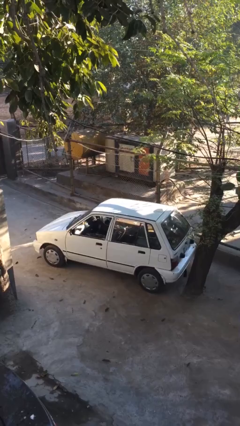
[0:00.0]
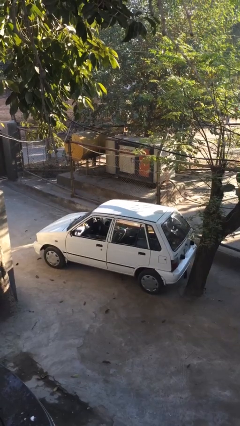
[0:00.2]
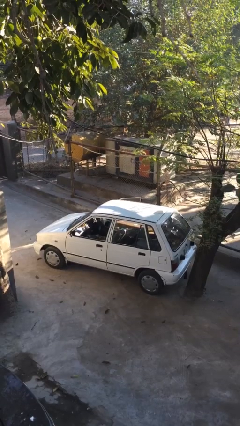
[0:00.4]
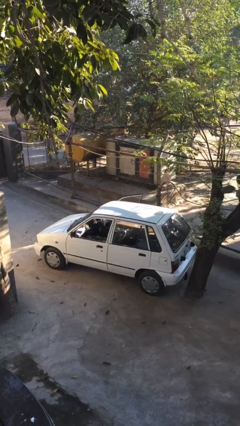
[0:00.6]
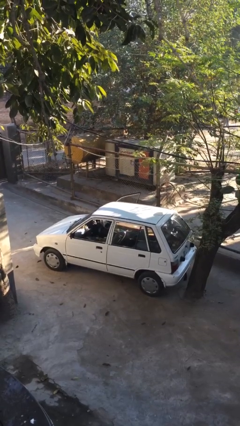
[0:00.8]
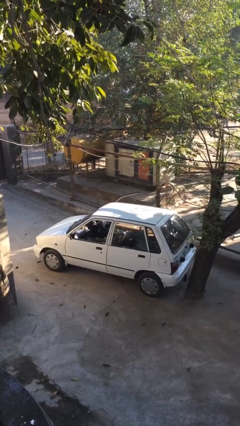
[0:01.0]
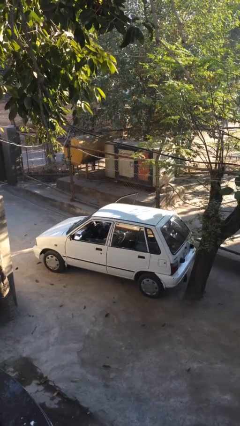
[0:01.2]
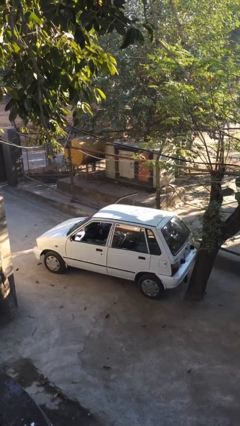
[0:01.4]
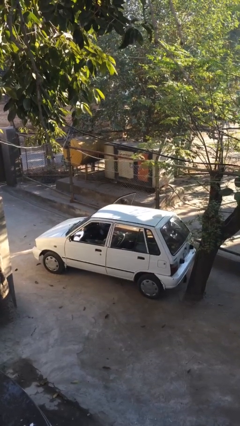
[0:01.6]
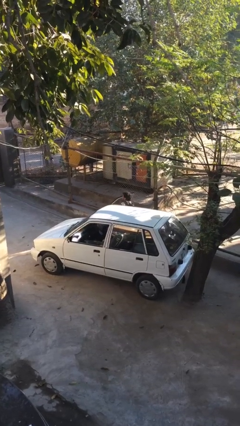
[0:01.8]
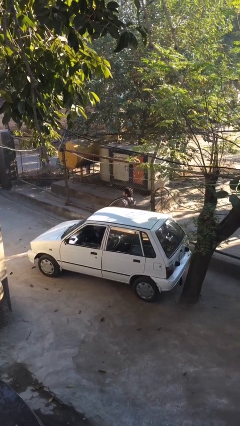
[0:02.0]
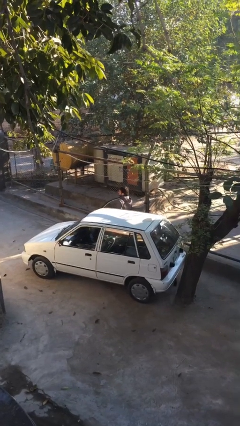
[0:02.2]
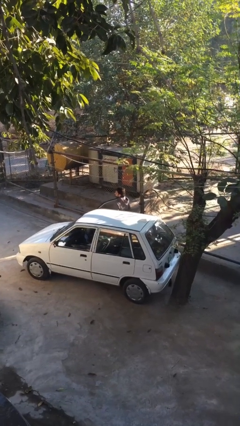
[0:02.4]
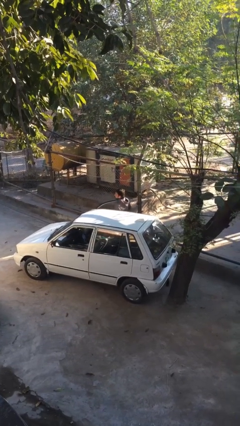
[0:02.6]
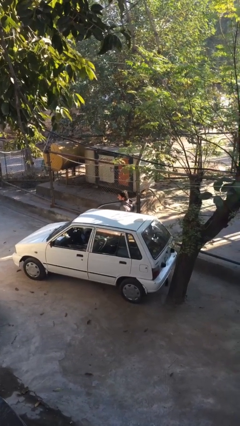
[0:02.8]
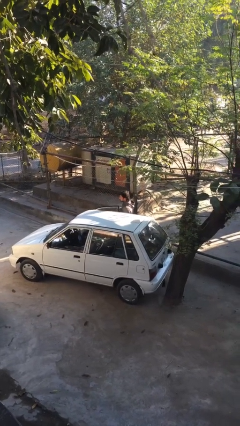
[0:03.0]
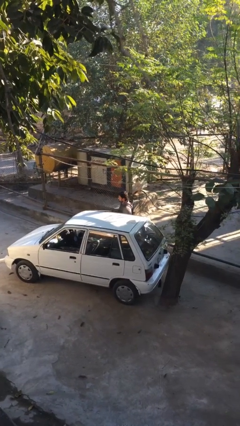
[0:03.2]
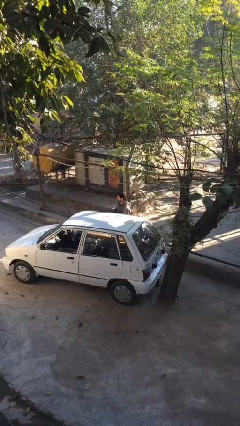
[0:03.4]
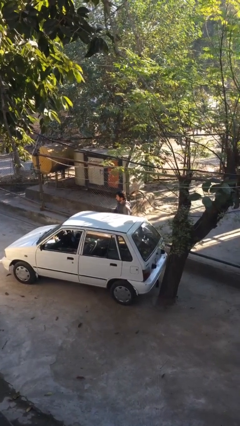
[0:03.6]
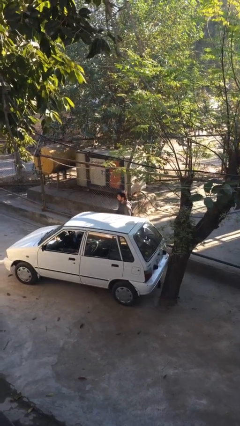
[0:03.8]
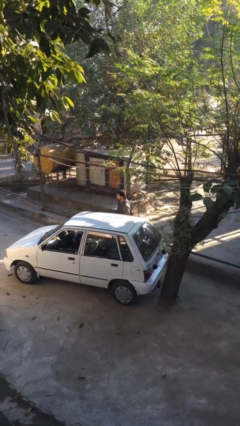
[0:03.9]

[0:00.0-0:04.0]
person exits car

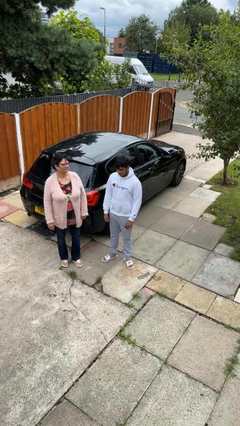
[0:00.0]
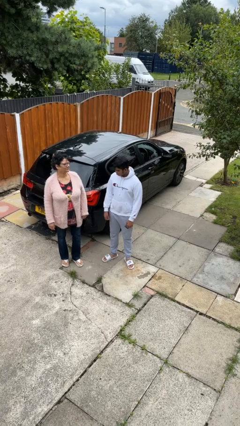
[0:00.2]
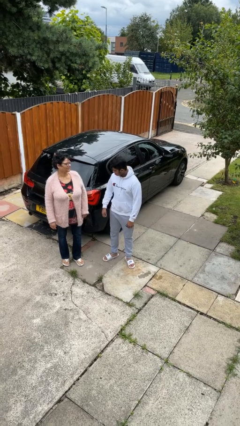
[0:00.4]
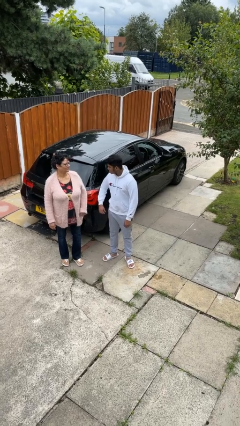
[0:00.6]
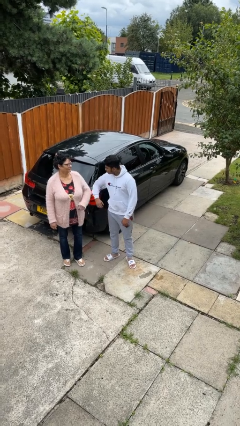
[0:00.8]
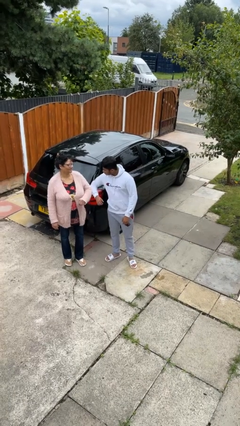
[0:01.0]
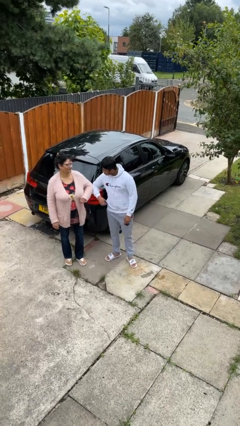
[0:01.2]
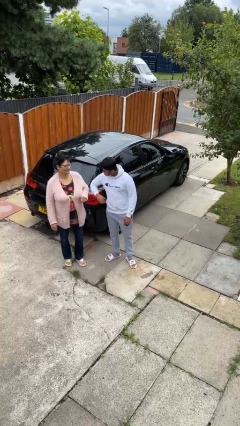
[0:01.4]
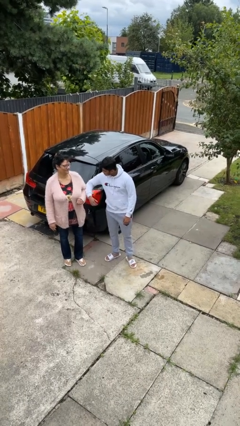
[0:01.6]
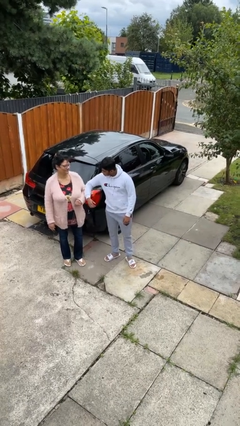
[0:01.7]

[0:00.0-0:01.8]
person nudges person with elbow

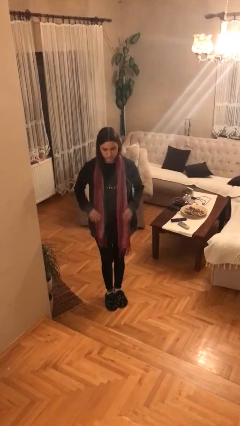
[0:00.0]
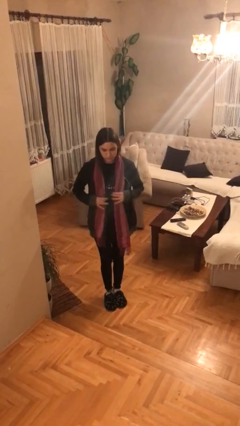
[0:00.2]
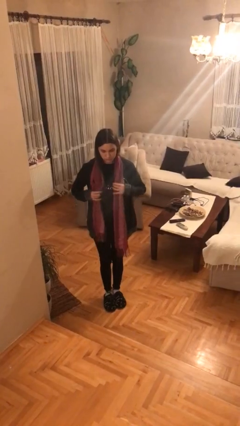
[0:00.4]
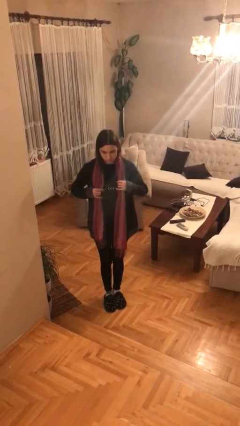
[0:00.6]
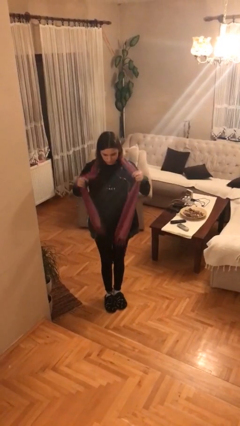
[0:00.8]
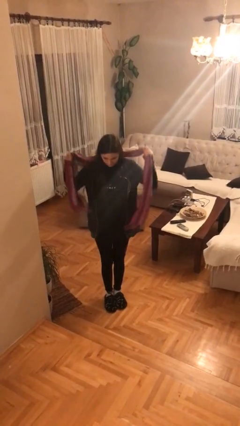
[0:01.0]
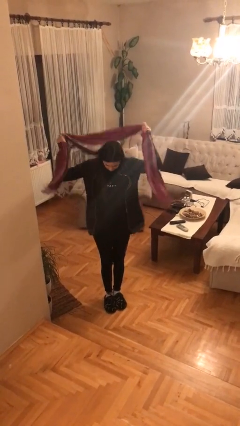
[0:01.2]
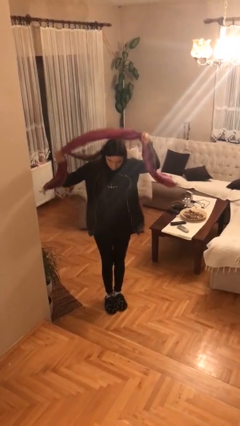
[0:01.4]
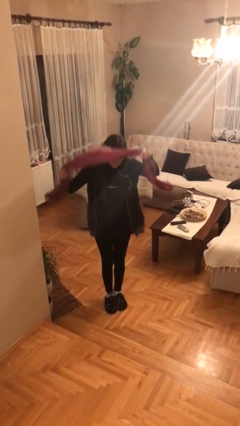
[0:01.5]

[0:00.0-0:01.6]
person takes off scarf

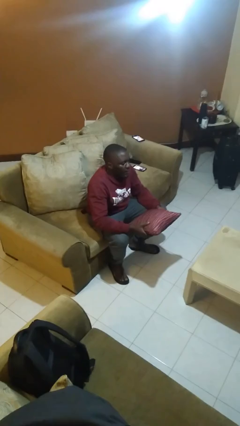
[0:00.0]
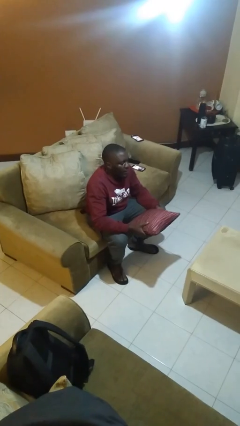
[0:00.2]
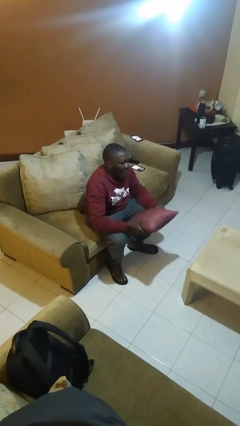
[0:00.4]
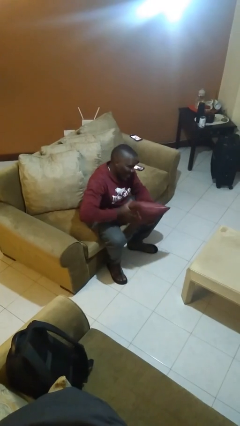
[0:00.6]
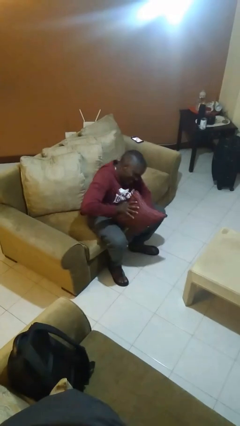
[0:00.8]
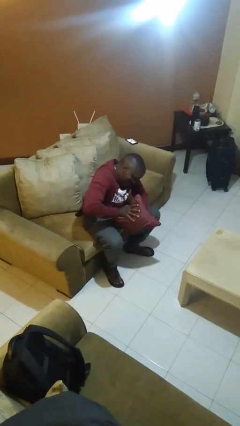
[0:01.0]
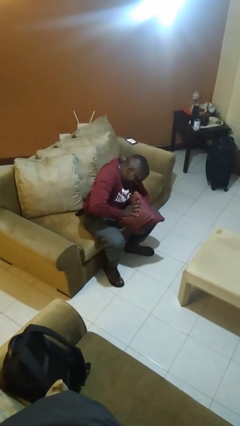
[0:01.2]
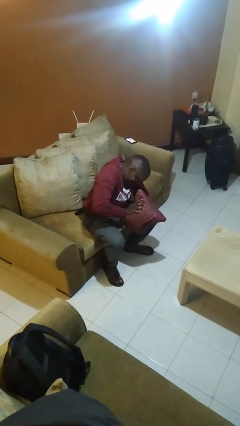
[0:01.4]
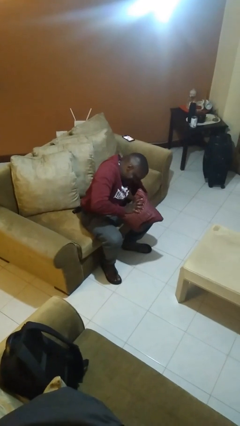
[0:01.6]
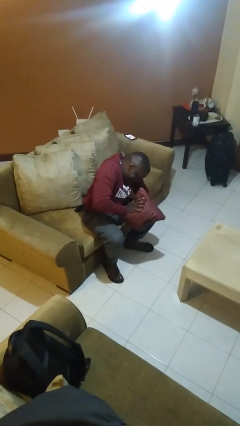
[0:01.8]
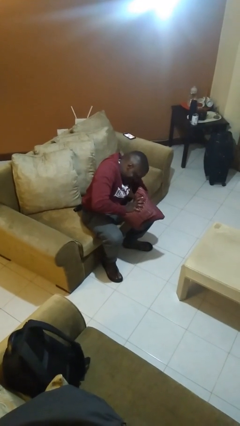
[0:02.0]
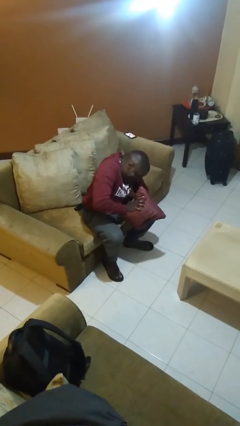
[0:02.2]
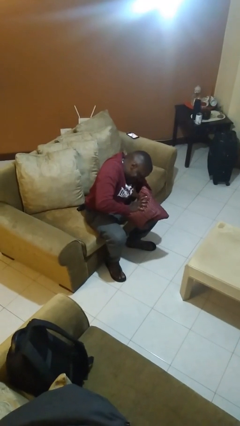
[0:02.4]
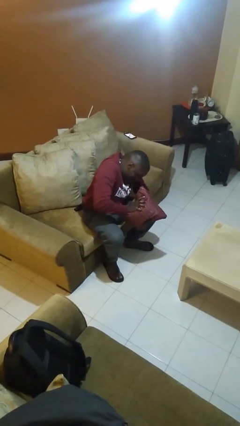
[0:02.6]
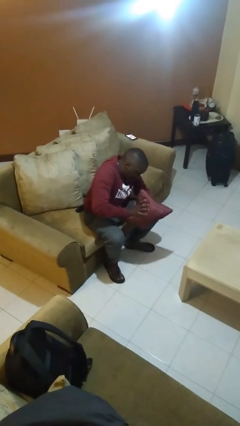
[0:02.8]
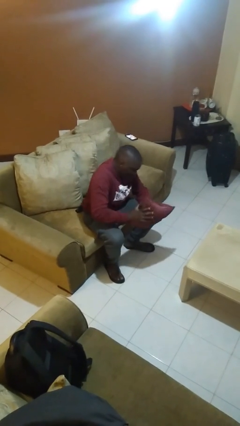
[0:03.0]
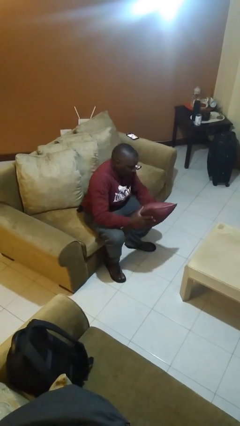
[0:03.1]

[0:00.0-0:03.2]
person squeezes object

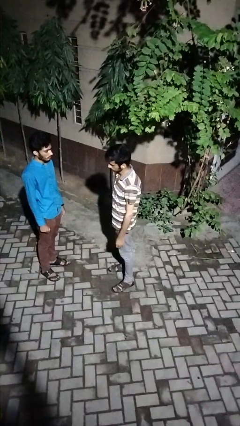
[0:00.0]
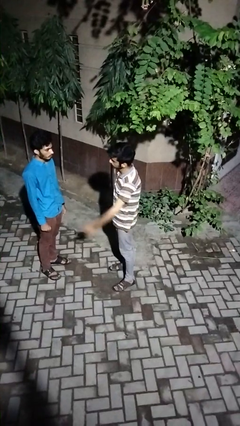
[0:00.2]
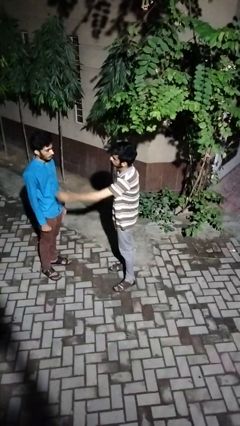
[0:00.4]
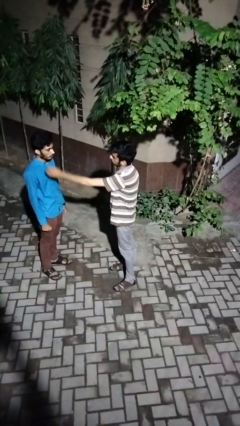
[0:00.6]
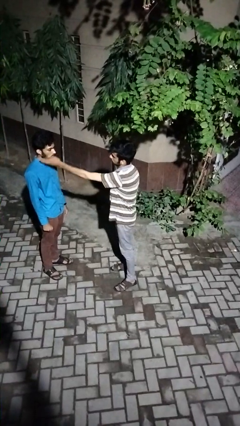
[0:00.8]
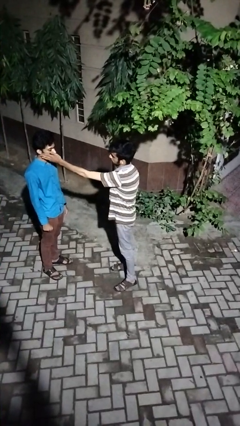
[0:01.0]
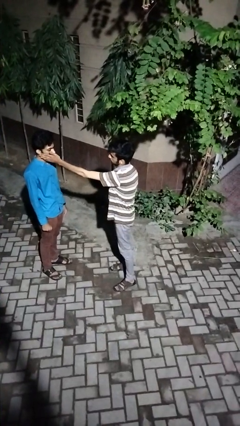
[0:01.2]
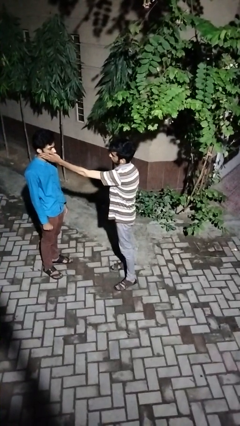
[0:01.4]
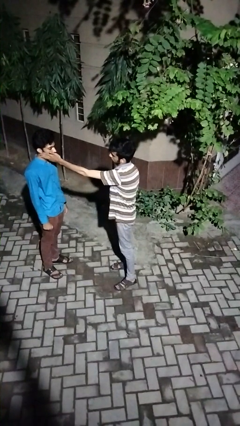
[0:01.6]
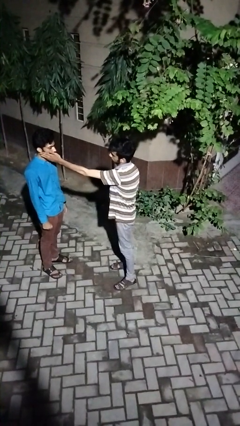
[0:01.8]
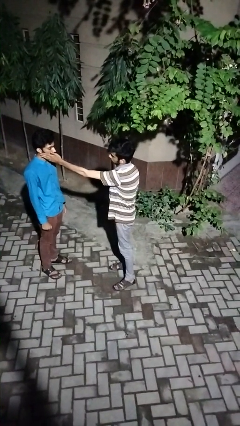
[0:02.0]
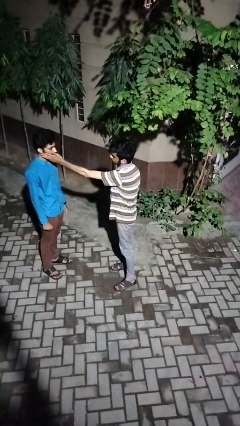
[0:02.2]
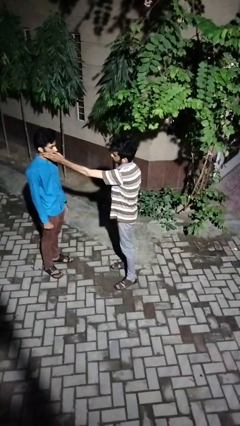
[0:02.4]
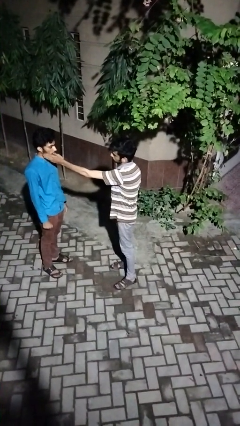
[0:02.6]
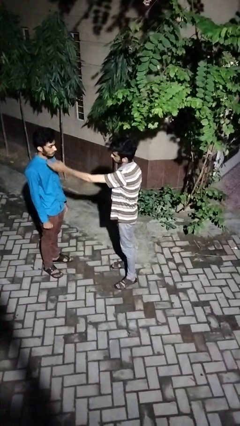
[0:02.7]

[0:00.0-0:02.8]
person touches face of person

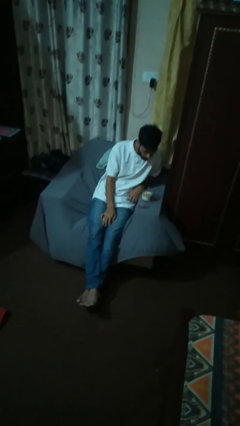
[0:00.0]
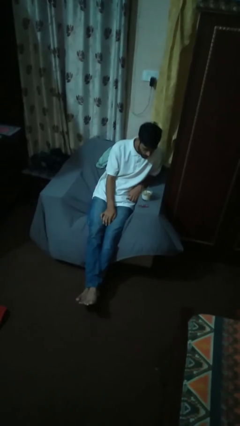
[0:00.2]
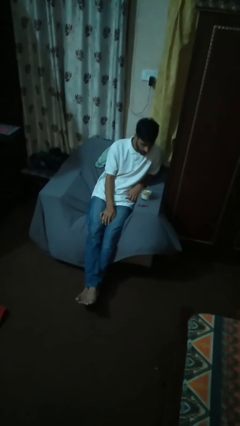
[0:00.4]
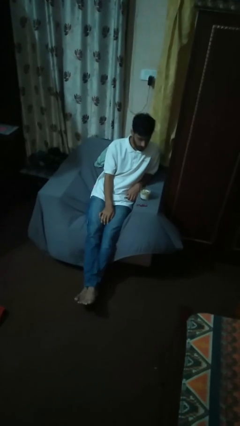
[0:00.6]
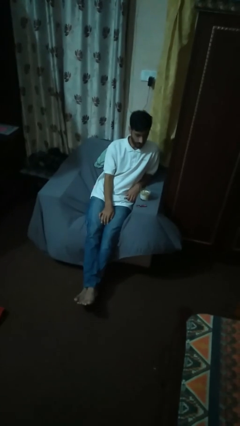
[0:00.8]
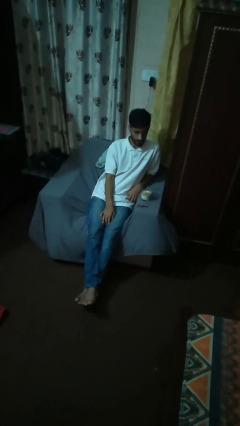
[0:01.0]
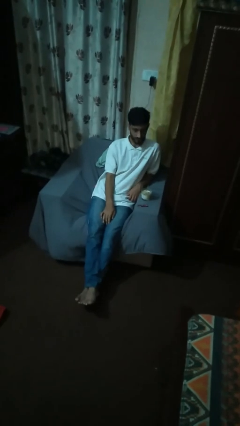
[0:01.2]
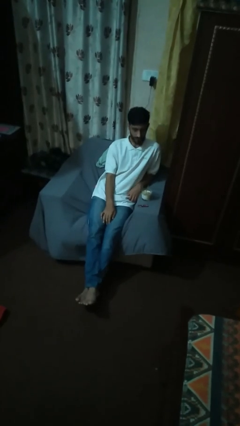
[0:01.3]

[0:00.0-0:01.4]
person extinguishes candle

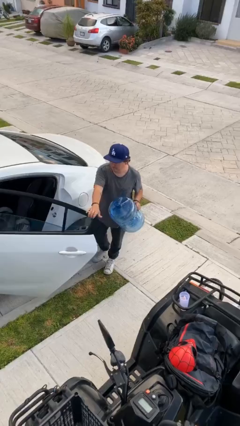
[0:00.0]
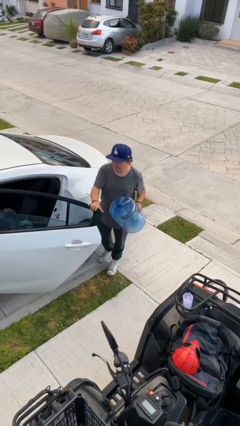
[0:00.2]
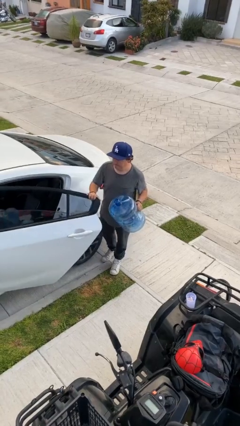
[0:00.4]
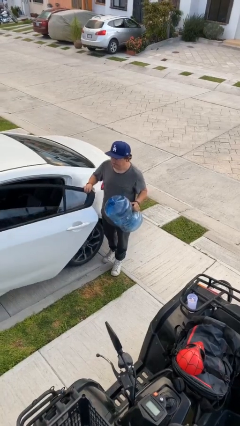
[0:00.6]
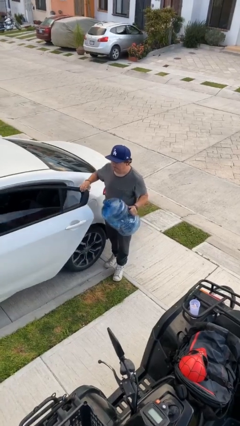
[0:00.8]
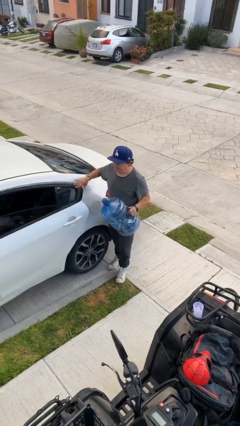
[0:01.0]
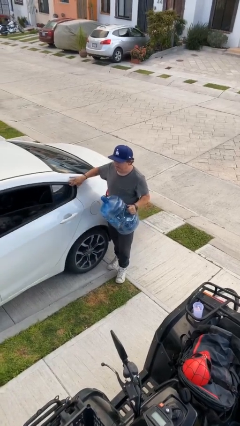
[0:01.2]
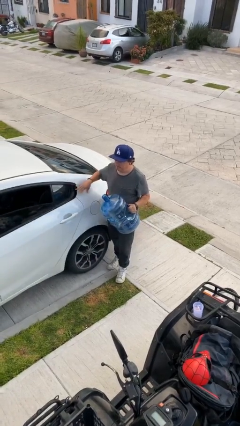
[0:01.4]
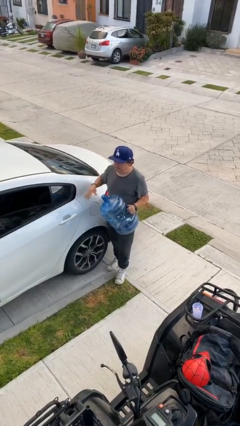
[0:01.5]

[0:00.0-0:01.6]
person closes car door

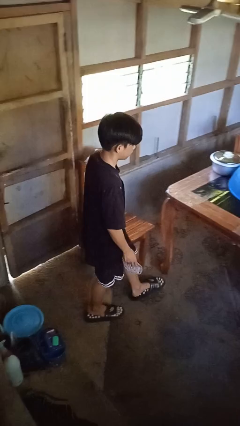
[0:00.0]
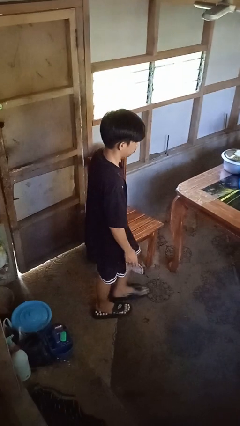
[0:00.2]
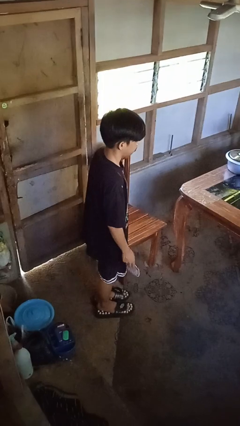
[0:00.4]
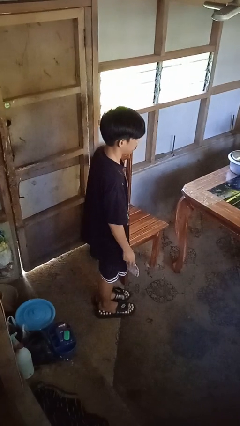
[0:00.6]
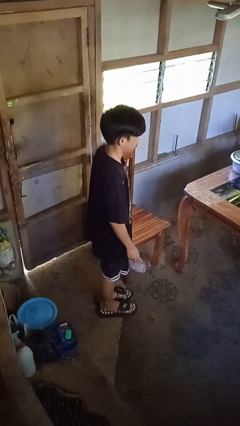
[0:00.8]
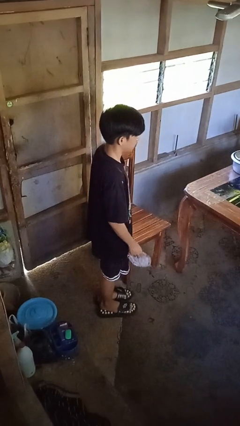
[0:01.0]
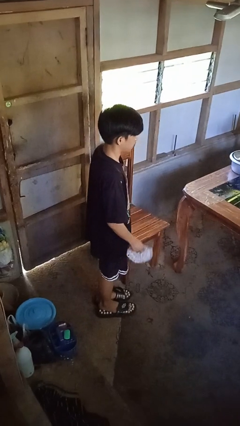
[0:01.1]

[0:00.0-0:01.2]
person throws object on table
